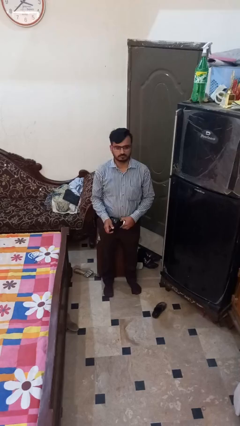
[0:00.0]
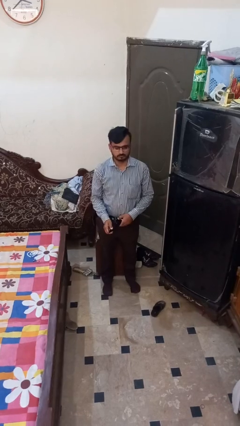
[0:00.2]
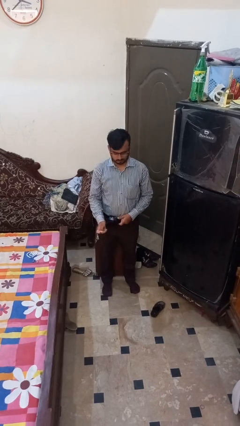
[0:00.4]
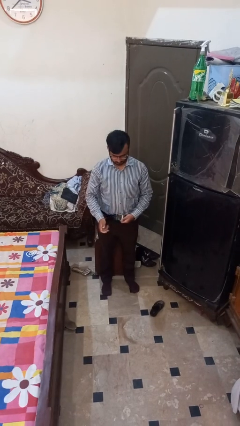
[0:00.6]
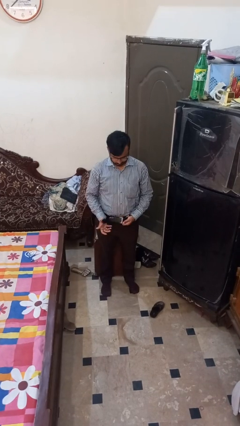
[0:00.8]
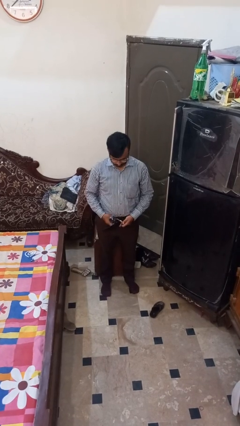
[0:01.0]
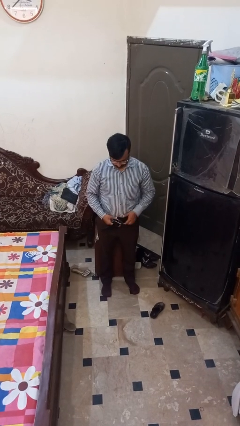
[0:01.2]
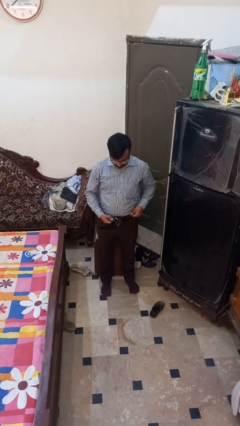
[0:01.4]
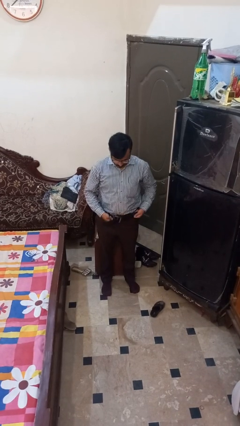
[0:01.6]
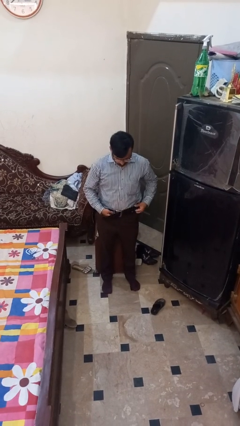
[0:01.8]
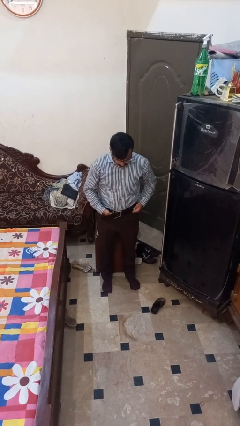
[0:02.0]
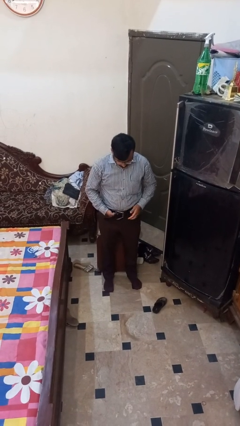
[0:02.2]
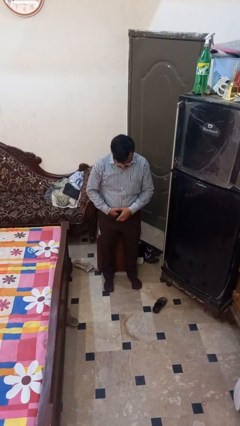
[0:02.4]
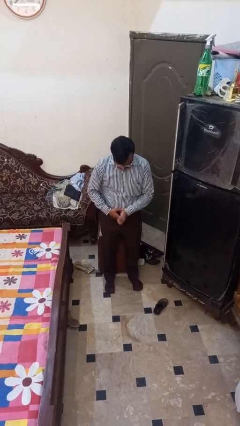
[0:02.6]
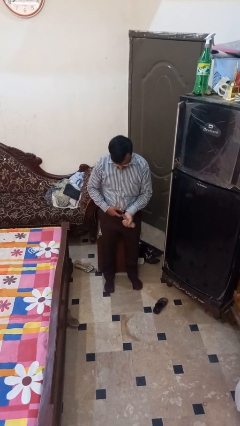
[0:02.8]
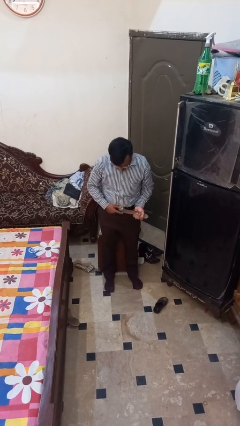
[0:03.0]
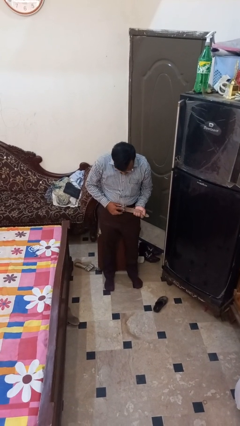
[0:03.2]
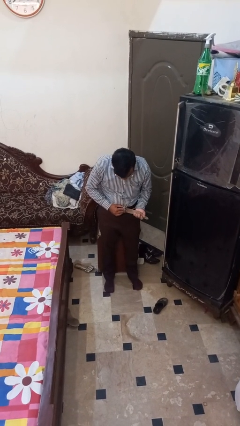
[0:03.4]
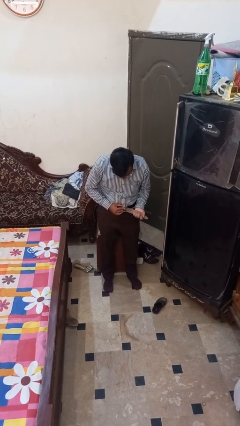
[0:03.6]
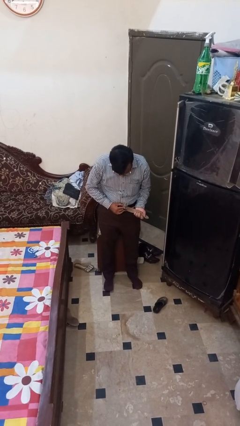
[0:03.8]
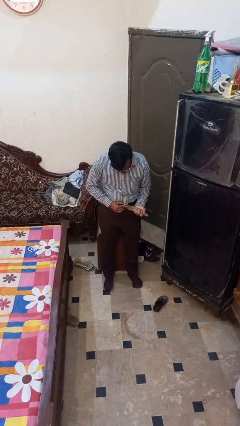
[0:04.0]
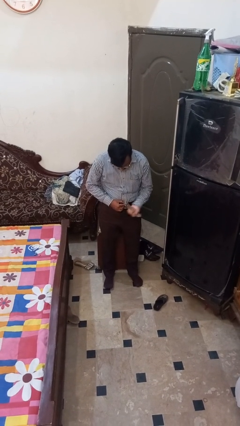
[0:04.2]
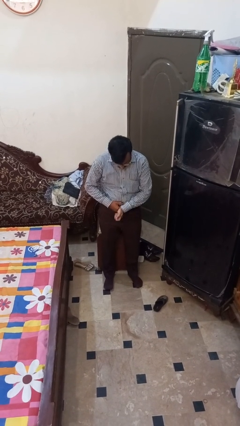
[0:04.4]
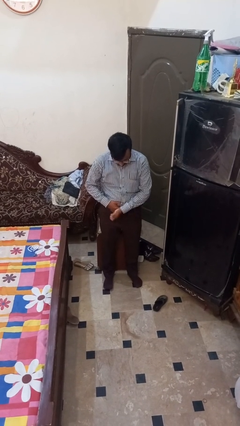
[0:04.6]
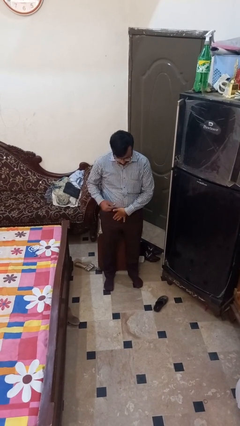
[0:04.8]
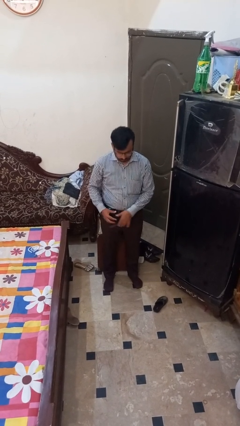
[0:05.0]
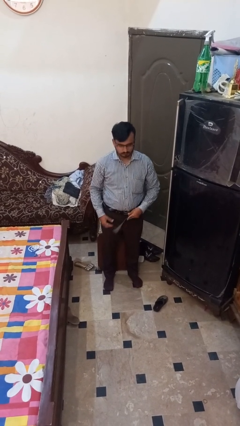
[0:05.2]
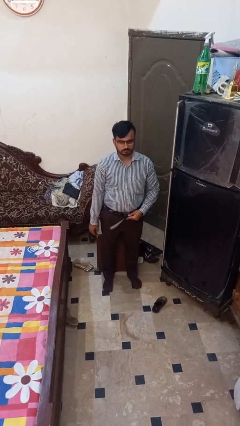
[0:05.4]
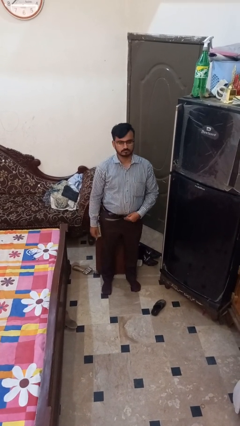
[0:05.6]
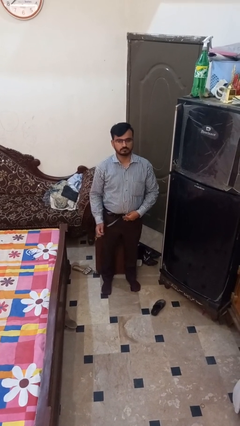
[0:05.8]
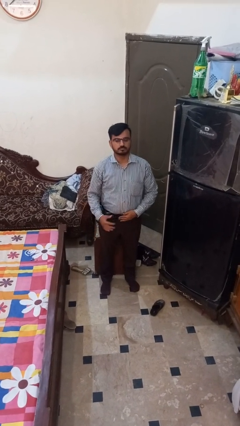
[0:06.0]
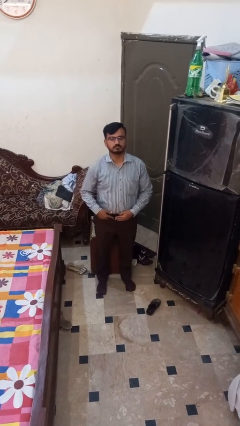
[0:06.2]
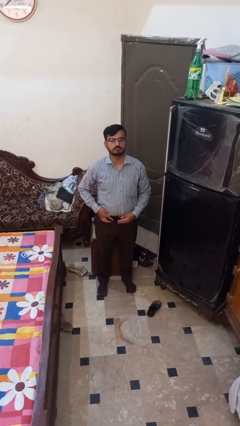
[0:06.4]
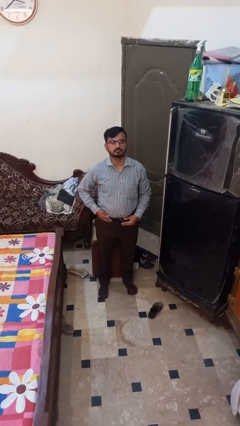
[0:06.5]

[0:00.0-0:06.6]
person puts on belt

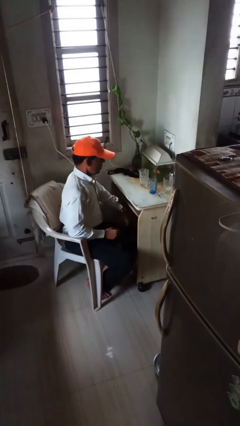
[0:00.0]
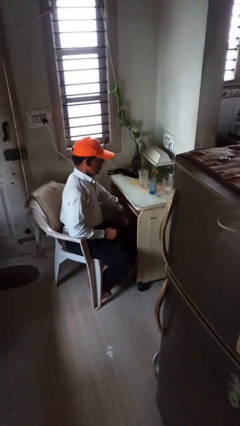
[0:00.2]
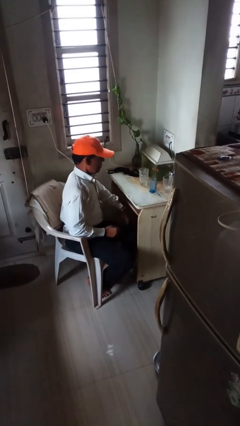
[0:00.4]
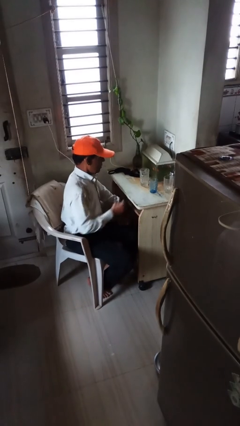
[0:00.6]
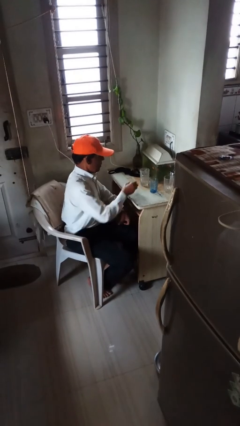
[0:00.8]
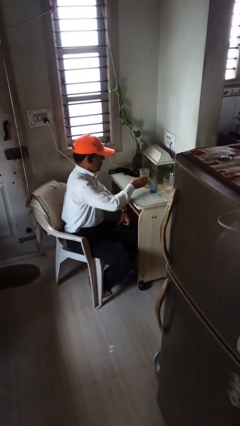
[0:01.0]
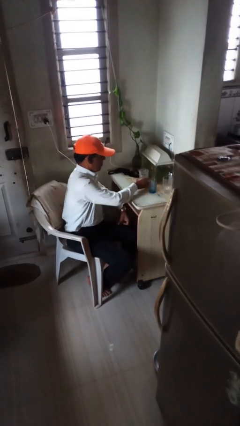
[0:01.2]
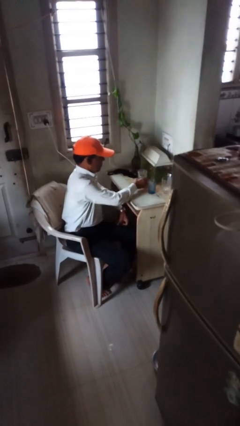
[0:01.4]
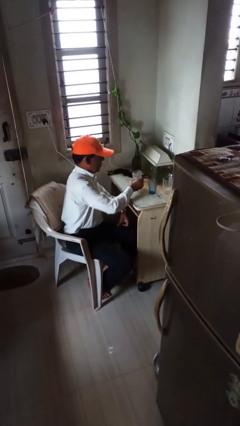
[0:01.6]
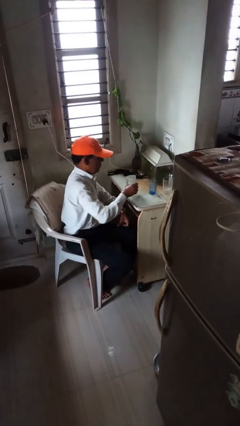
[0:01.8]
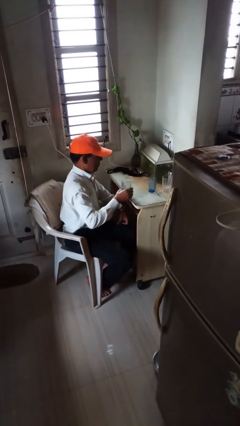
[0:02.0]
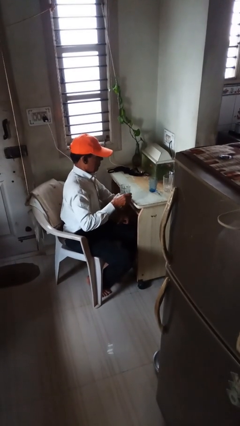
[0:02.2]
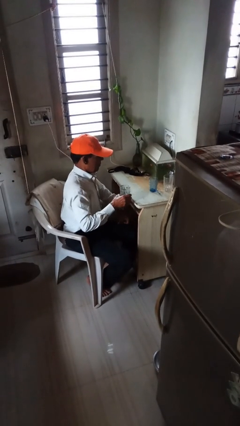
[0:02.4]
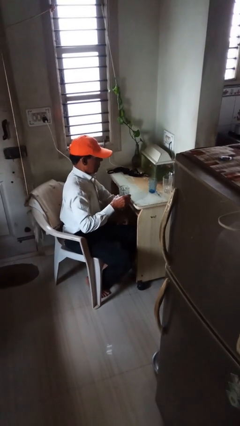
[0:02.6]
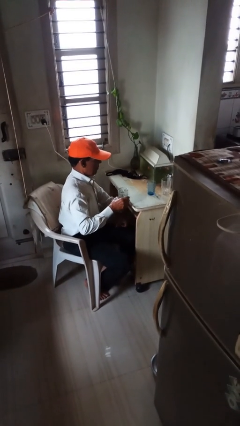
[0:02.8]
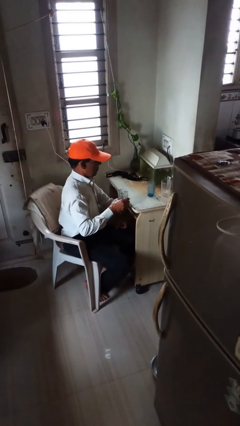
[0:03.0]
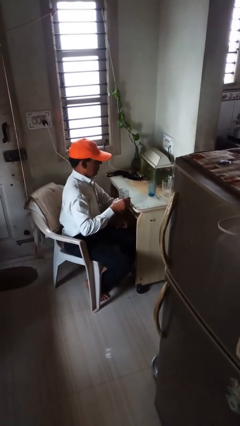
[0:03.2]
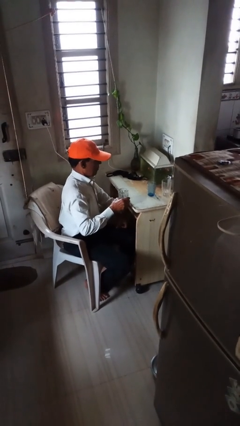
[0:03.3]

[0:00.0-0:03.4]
person picks up object from table

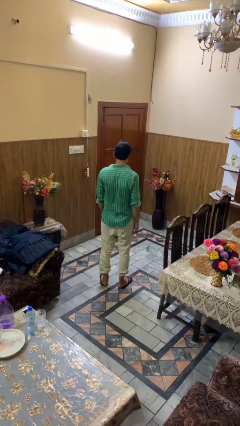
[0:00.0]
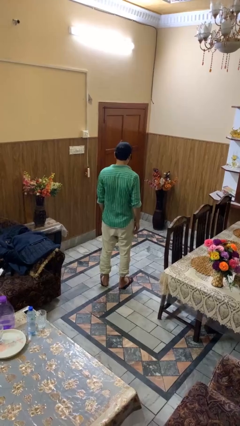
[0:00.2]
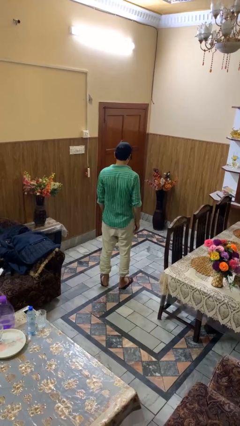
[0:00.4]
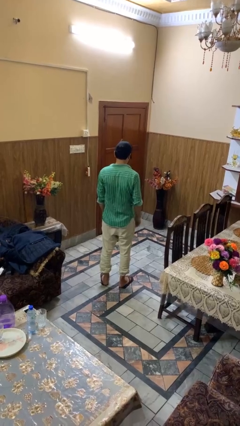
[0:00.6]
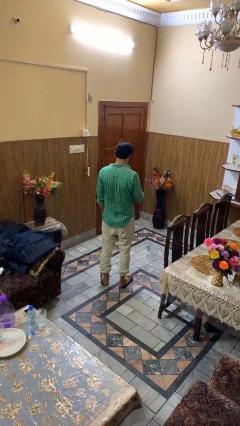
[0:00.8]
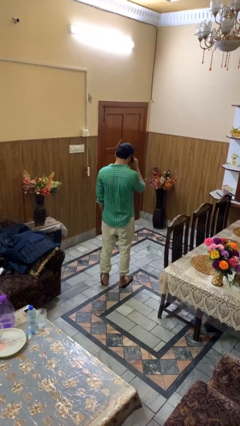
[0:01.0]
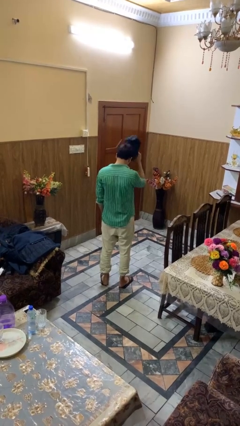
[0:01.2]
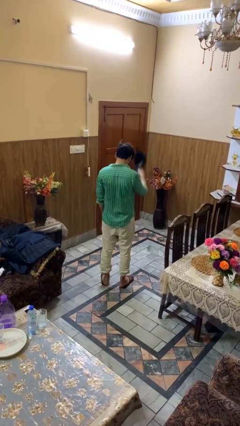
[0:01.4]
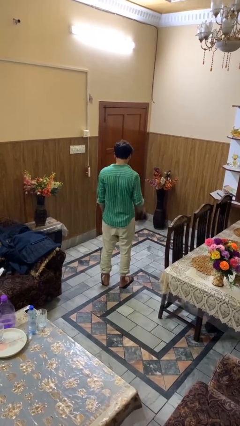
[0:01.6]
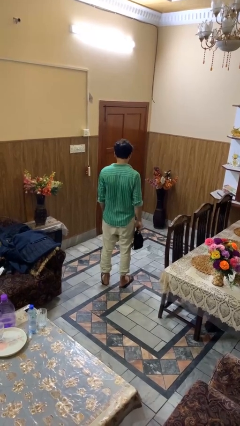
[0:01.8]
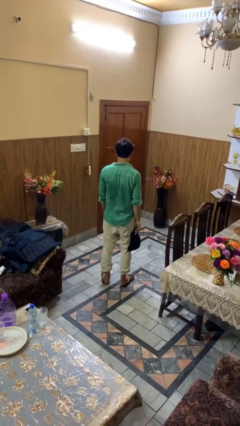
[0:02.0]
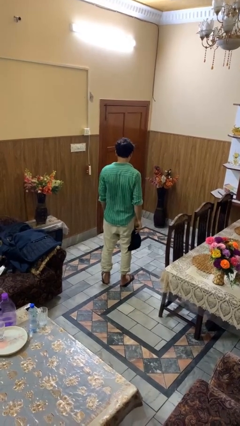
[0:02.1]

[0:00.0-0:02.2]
person takes off hat

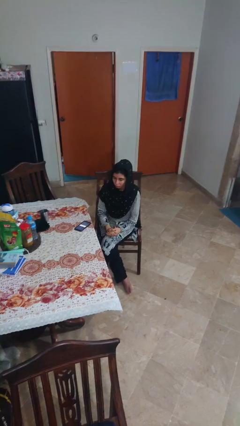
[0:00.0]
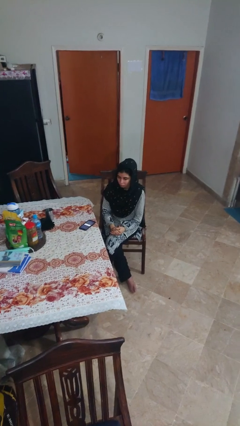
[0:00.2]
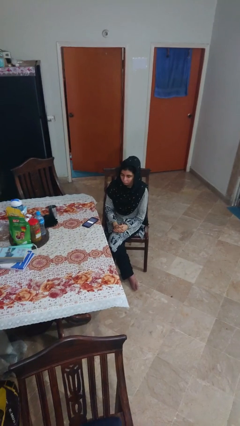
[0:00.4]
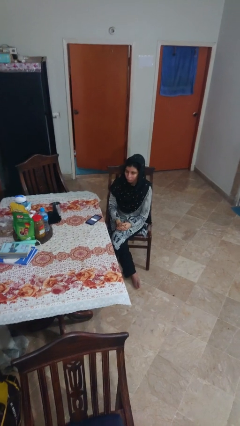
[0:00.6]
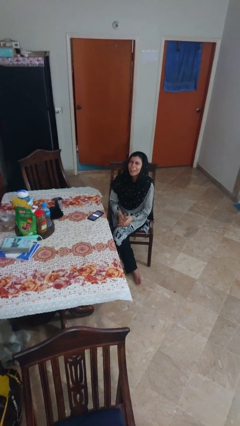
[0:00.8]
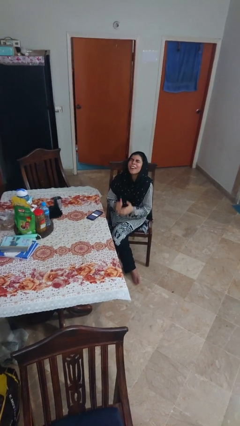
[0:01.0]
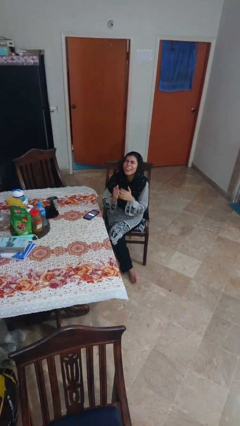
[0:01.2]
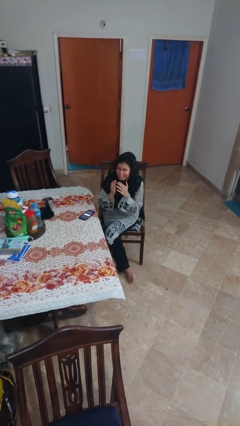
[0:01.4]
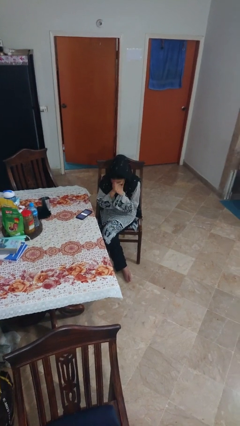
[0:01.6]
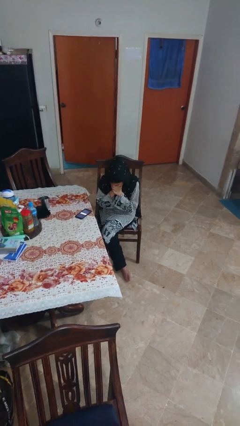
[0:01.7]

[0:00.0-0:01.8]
person sneezes into hand

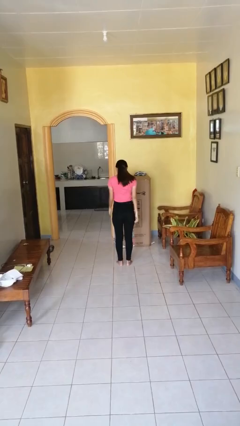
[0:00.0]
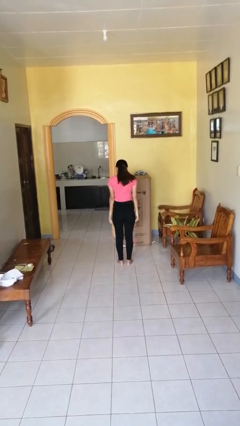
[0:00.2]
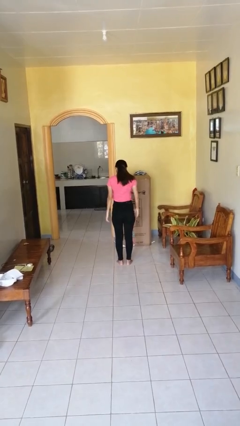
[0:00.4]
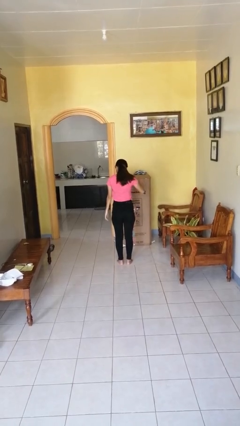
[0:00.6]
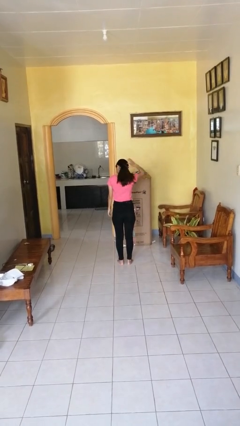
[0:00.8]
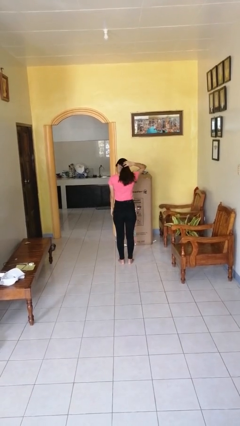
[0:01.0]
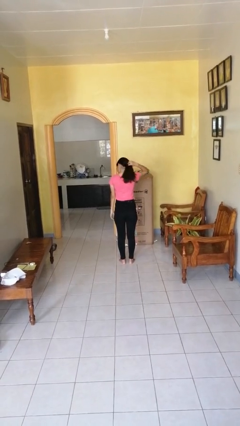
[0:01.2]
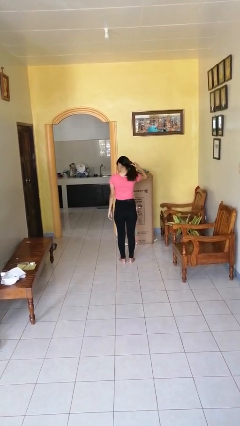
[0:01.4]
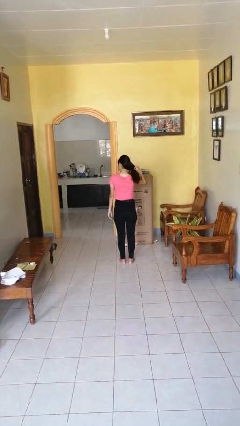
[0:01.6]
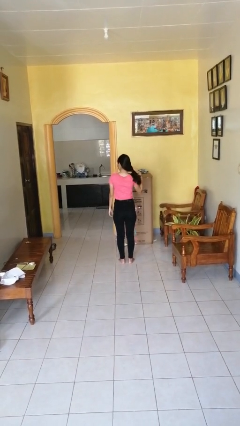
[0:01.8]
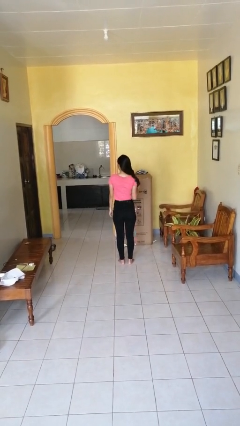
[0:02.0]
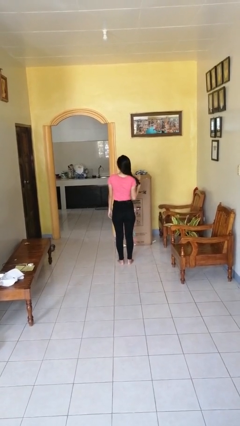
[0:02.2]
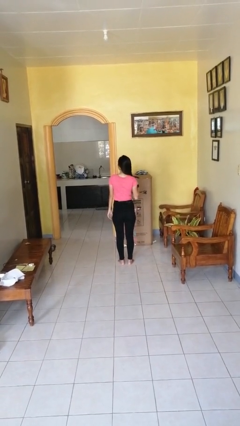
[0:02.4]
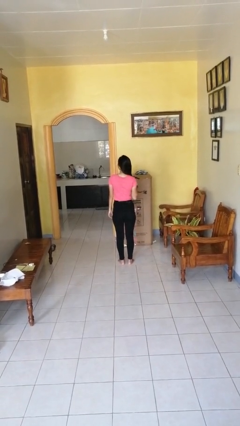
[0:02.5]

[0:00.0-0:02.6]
person takes off hairtie

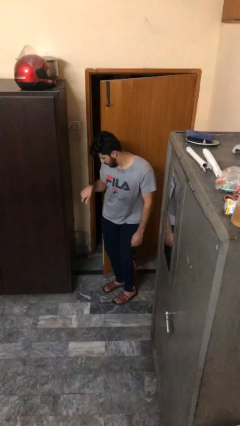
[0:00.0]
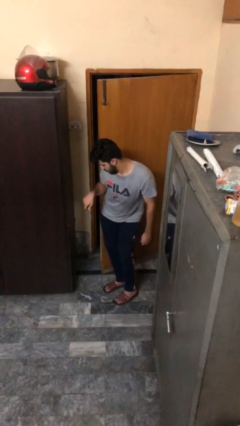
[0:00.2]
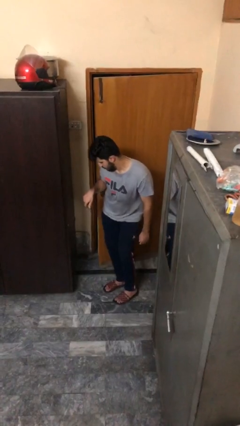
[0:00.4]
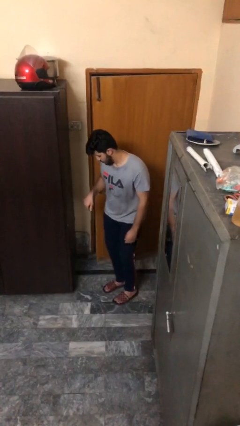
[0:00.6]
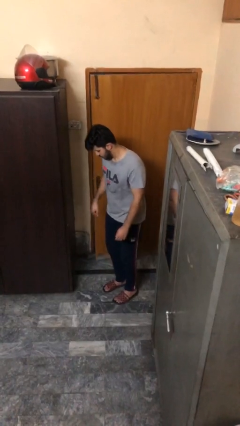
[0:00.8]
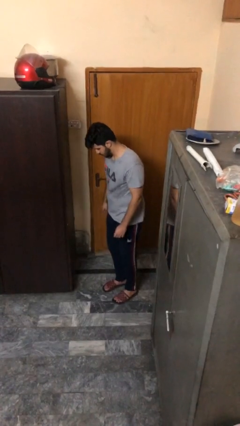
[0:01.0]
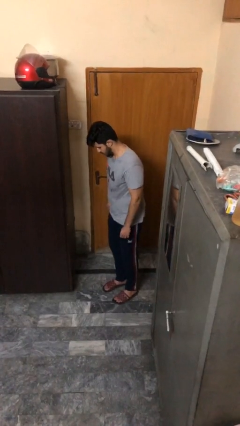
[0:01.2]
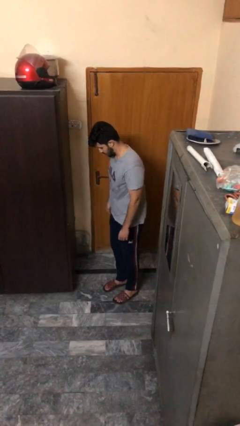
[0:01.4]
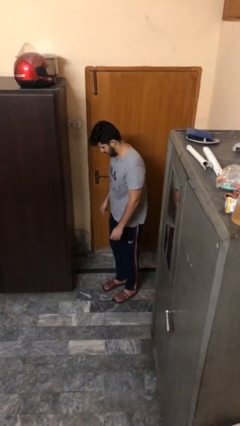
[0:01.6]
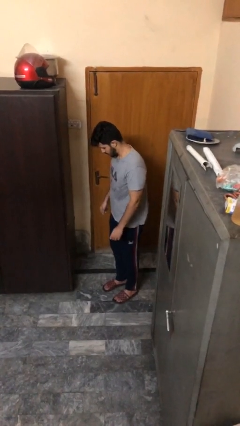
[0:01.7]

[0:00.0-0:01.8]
person closes door with hip
